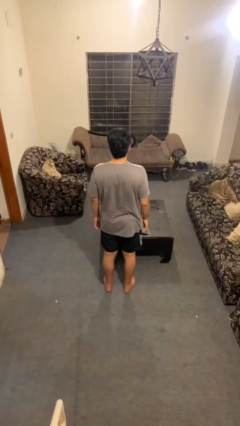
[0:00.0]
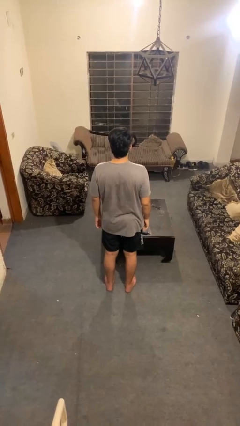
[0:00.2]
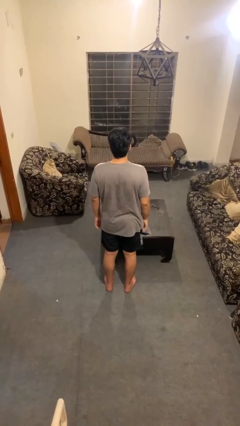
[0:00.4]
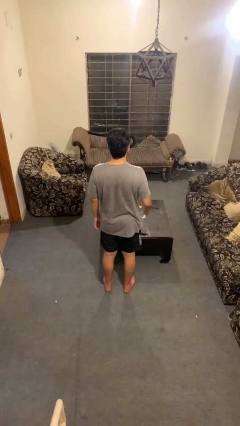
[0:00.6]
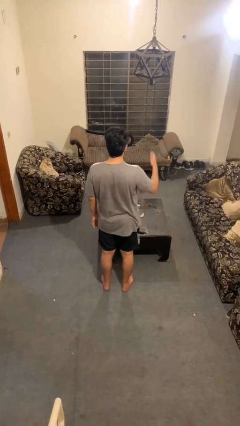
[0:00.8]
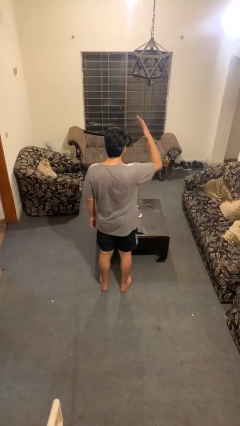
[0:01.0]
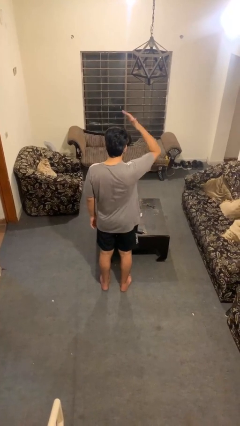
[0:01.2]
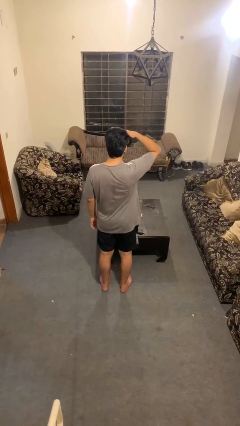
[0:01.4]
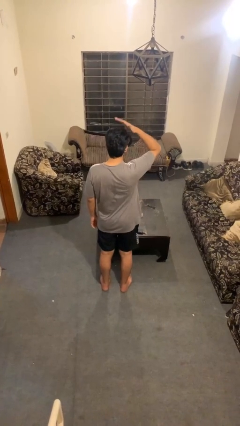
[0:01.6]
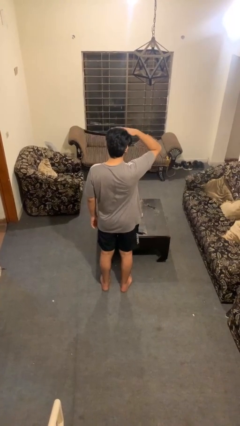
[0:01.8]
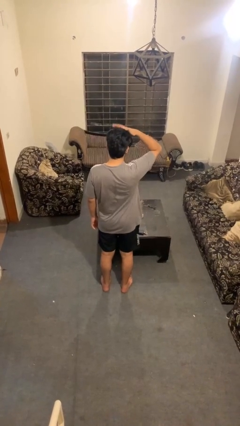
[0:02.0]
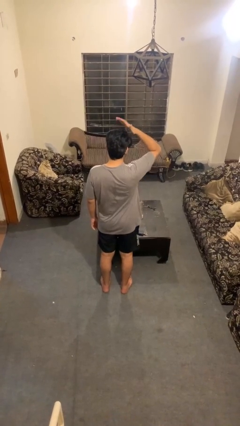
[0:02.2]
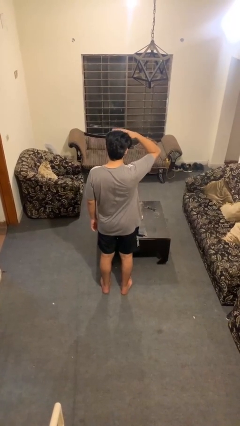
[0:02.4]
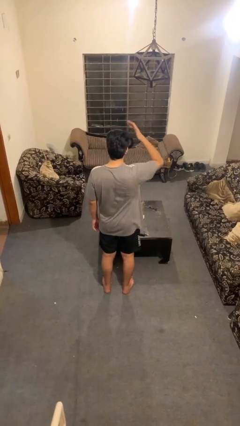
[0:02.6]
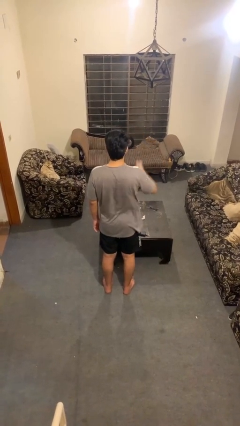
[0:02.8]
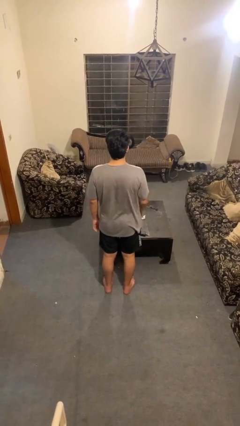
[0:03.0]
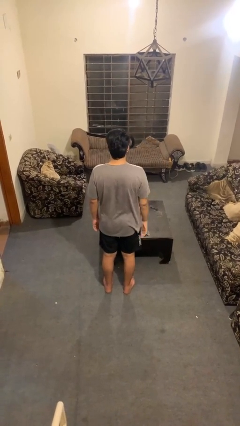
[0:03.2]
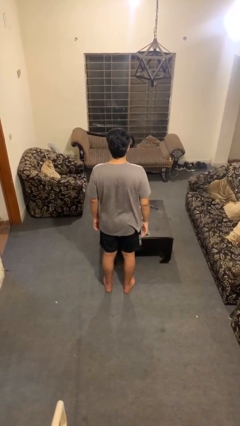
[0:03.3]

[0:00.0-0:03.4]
person pats head

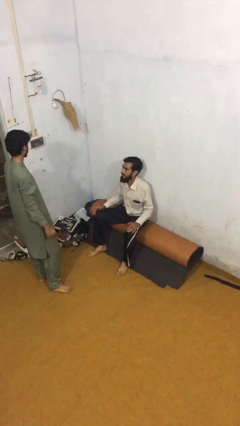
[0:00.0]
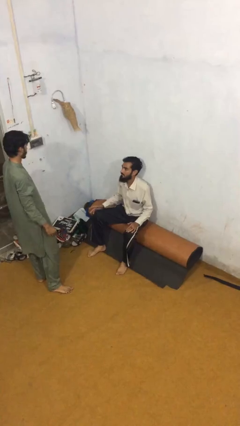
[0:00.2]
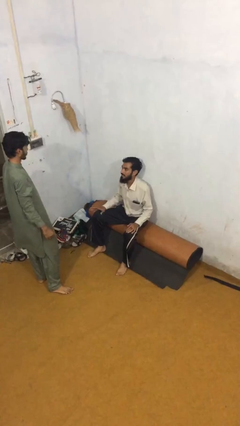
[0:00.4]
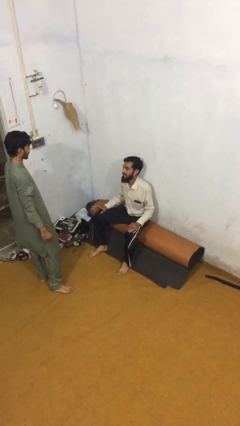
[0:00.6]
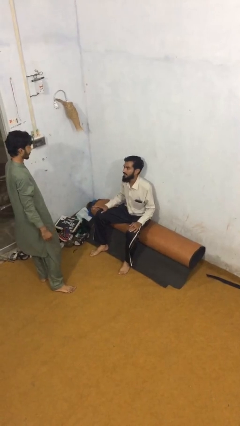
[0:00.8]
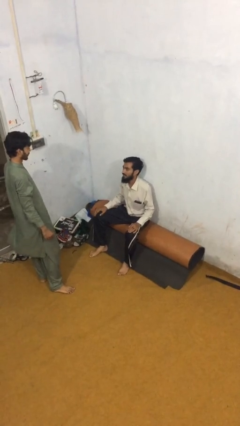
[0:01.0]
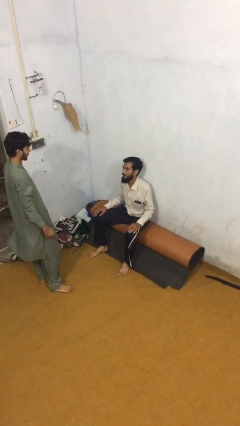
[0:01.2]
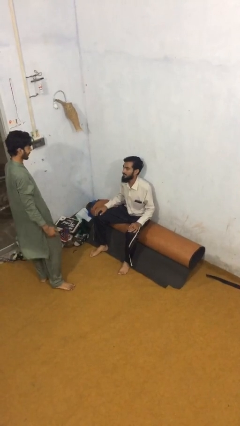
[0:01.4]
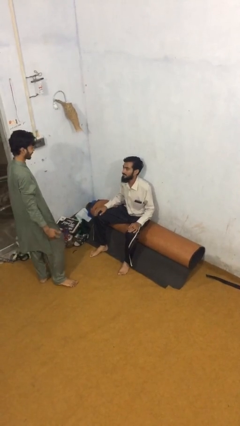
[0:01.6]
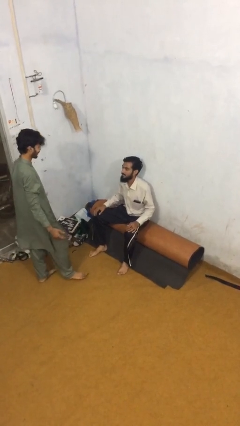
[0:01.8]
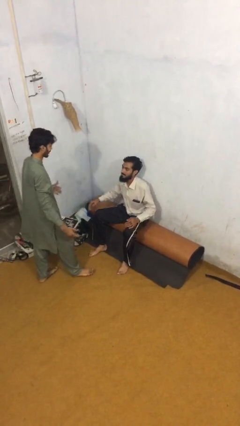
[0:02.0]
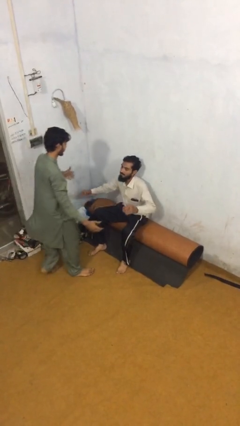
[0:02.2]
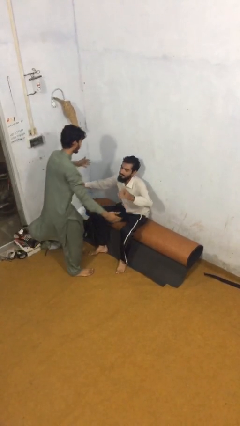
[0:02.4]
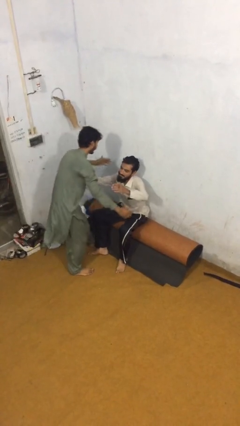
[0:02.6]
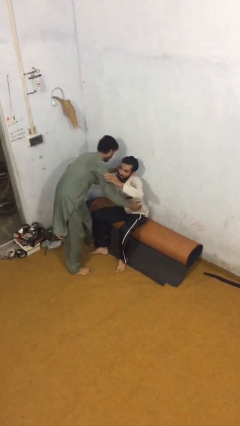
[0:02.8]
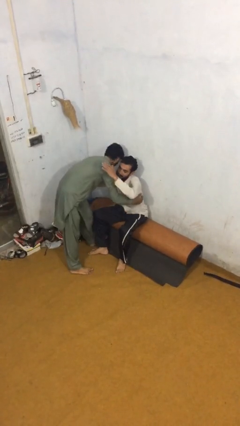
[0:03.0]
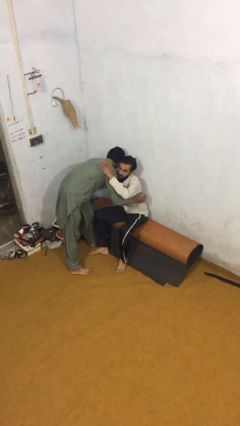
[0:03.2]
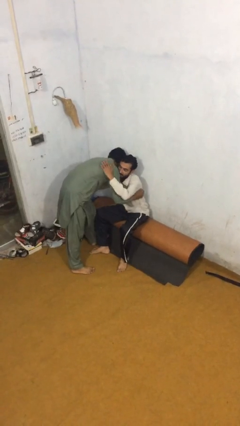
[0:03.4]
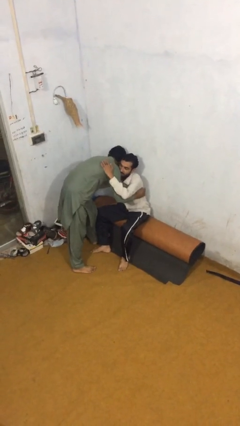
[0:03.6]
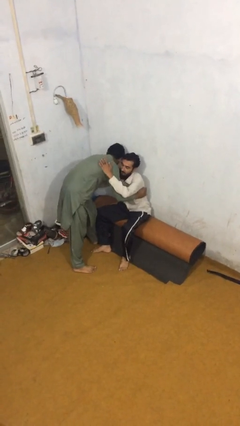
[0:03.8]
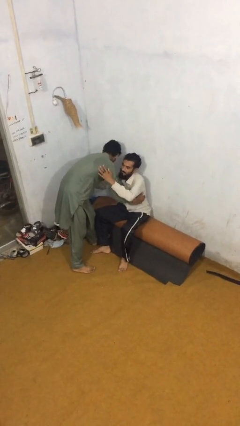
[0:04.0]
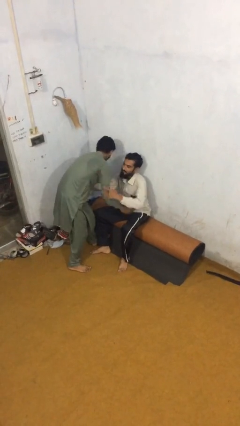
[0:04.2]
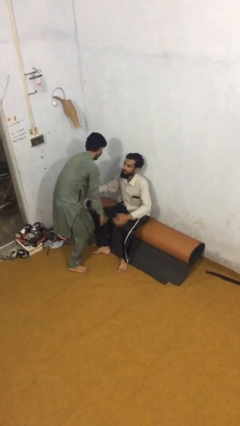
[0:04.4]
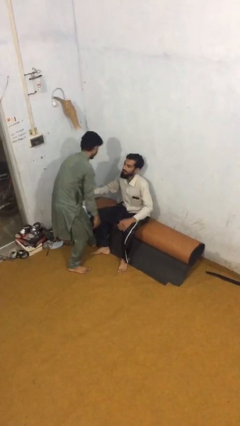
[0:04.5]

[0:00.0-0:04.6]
person embraces person

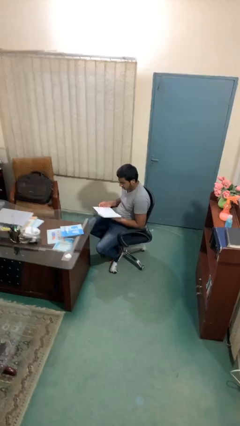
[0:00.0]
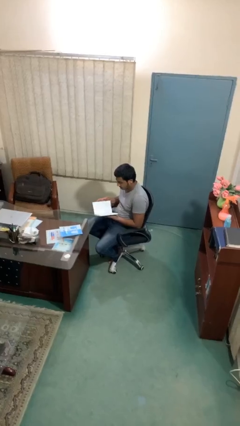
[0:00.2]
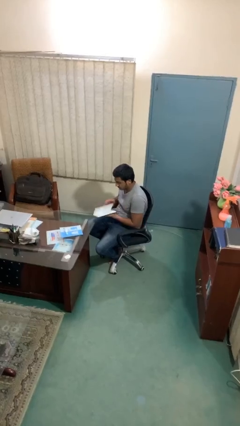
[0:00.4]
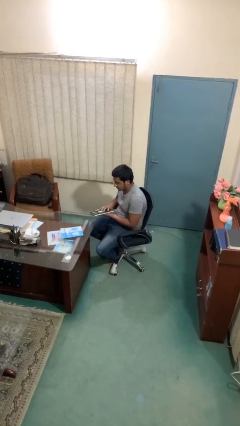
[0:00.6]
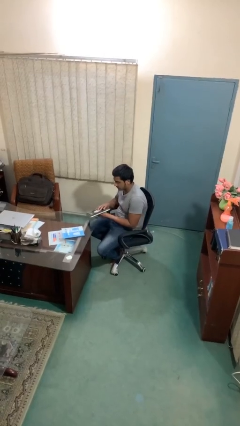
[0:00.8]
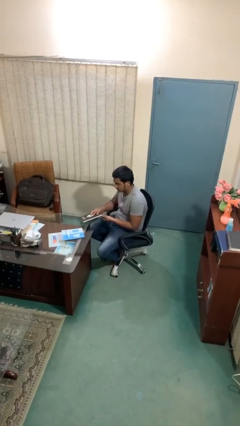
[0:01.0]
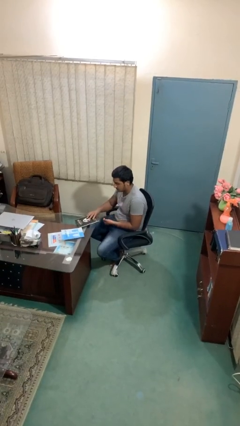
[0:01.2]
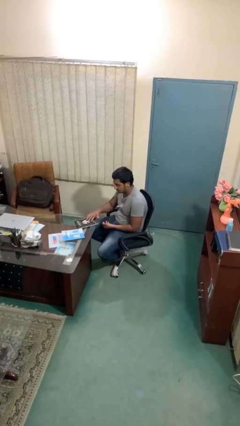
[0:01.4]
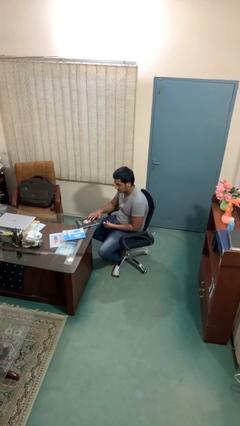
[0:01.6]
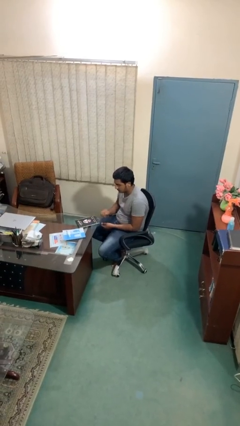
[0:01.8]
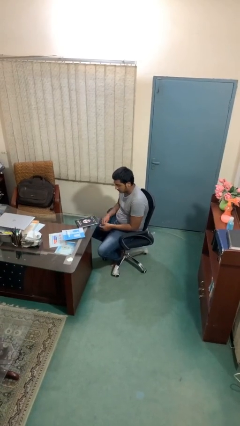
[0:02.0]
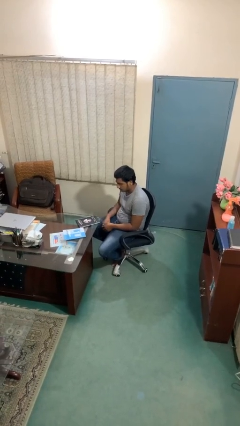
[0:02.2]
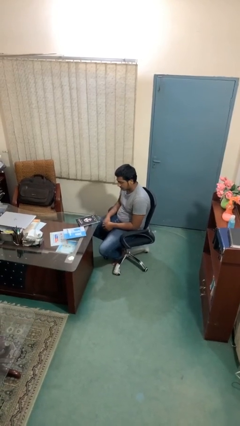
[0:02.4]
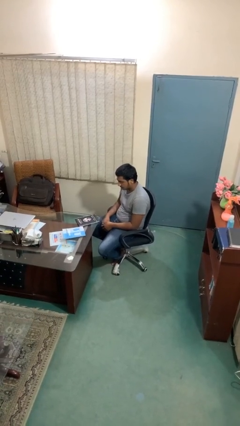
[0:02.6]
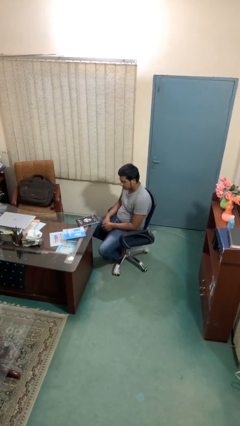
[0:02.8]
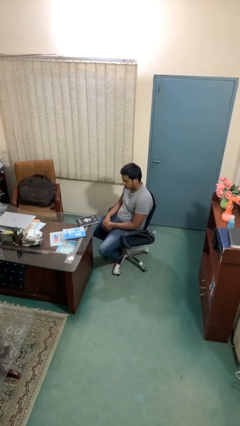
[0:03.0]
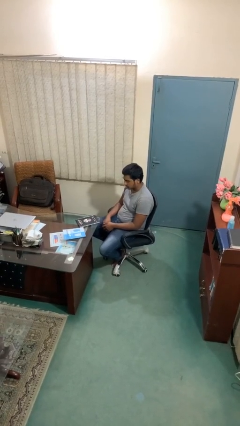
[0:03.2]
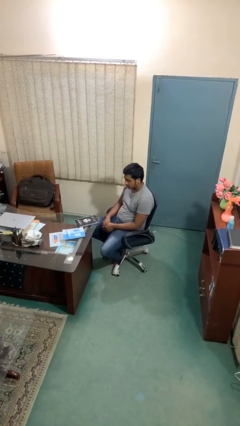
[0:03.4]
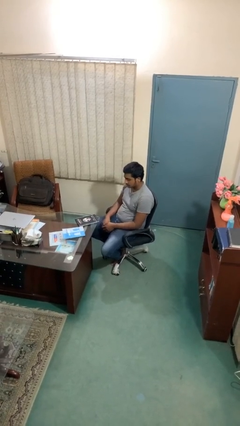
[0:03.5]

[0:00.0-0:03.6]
person puts down object on table

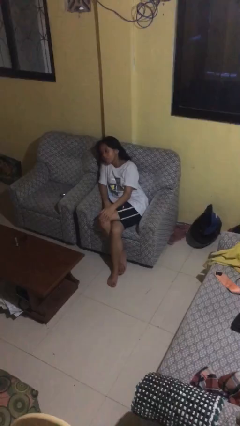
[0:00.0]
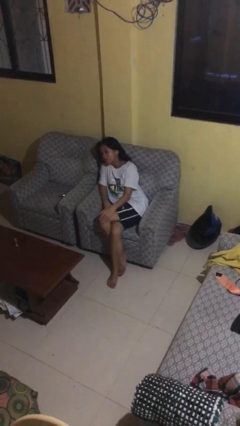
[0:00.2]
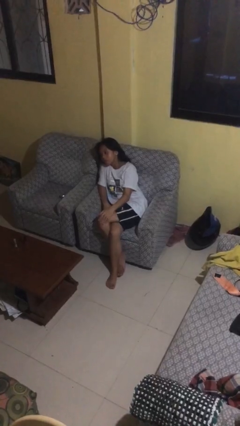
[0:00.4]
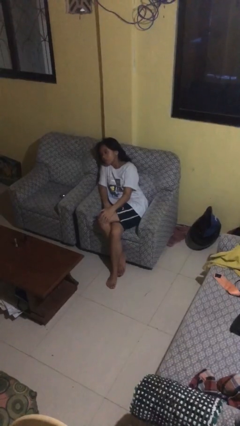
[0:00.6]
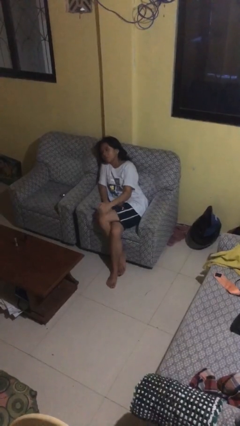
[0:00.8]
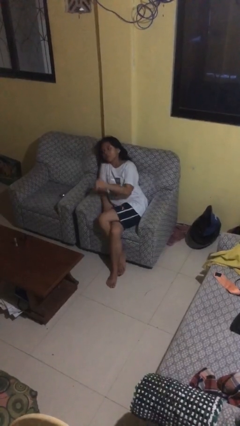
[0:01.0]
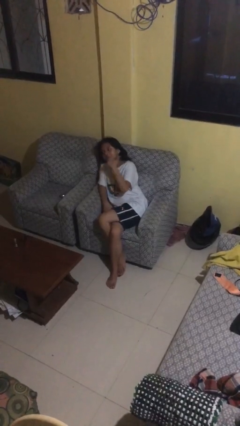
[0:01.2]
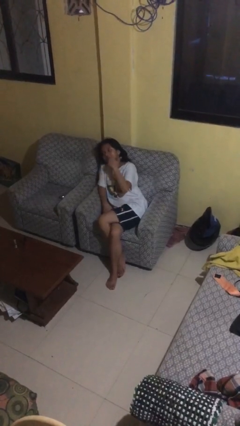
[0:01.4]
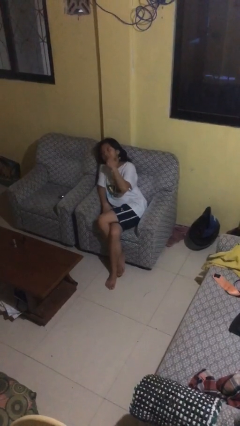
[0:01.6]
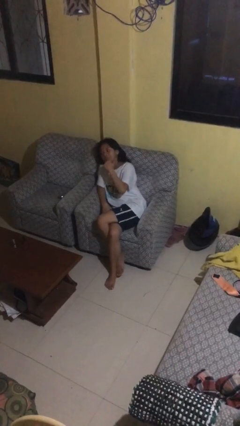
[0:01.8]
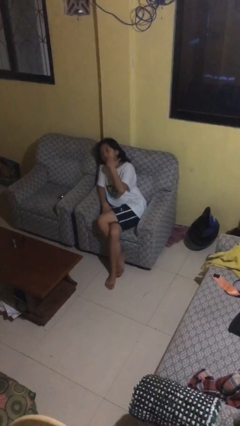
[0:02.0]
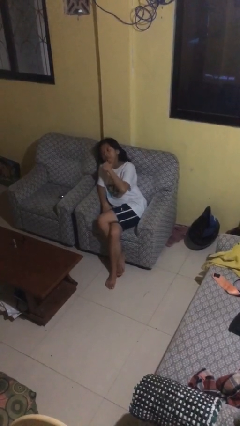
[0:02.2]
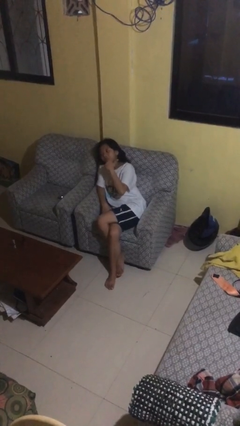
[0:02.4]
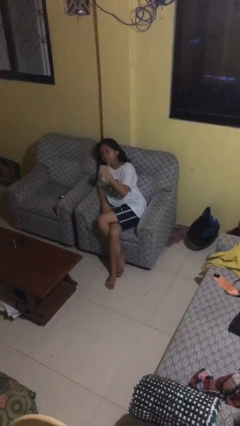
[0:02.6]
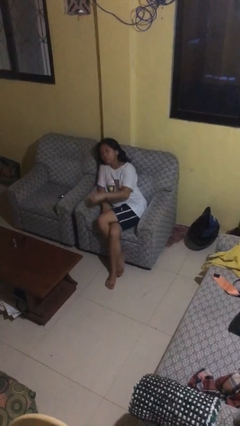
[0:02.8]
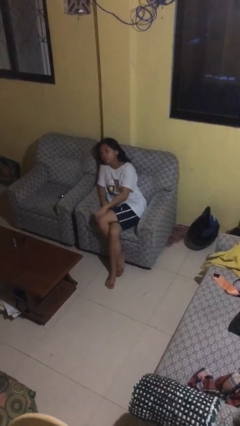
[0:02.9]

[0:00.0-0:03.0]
person gestures behind me

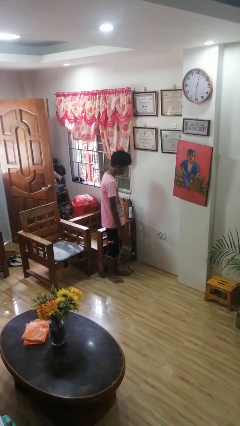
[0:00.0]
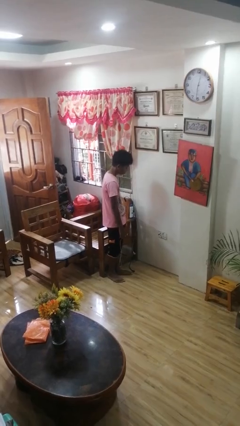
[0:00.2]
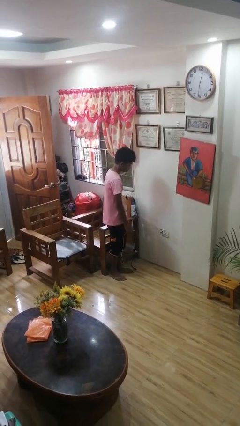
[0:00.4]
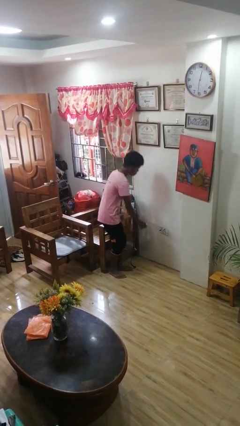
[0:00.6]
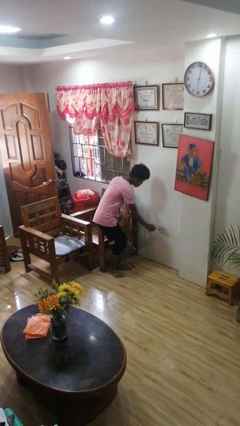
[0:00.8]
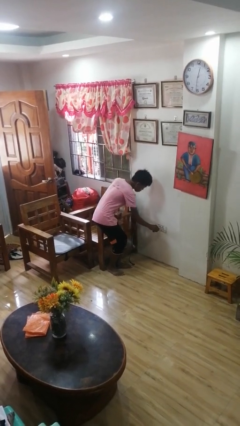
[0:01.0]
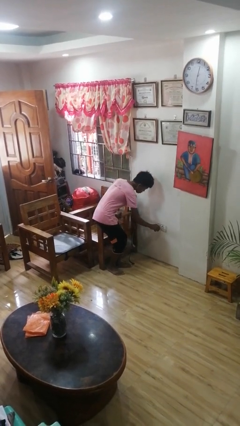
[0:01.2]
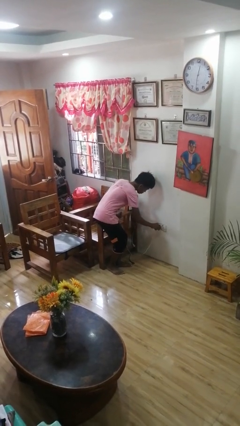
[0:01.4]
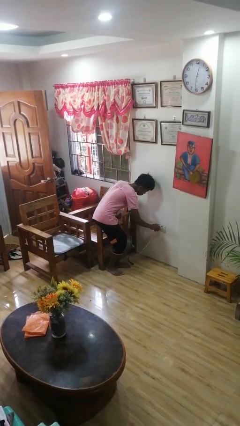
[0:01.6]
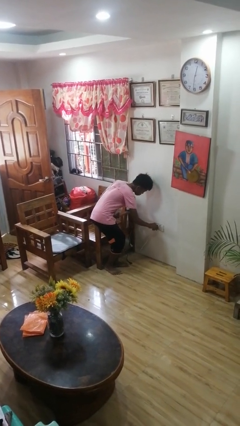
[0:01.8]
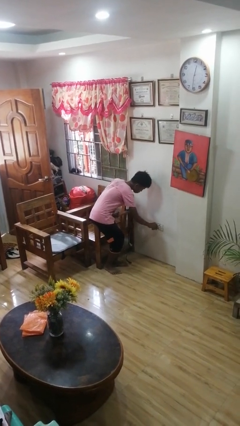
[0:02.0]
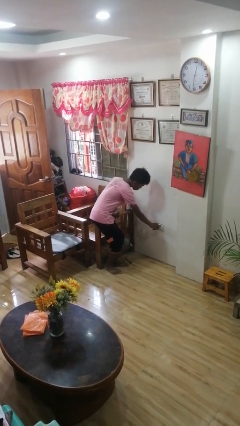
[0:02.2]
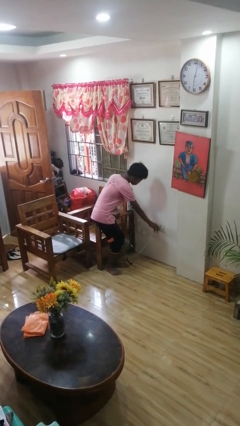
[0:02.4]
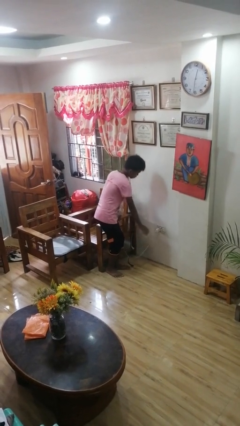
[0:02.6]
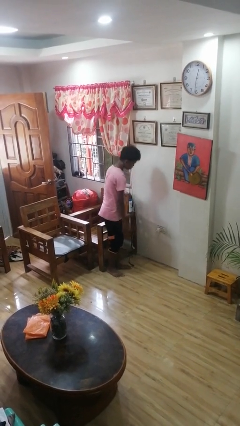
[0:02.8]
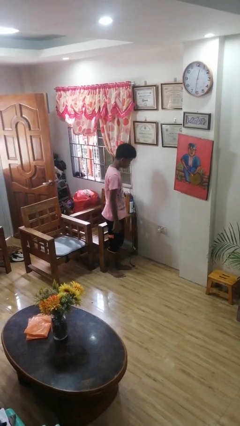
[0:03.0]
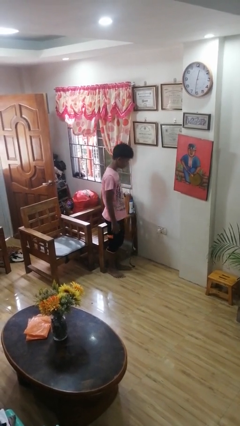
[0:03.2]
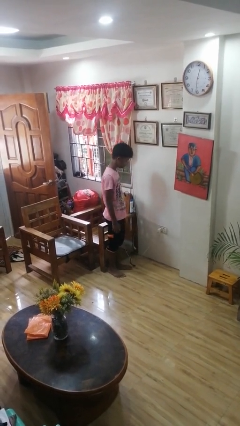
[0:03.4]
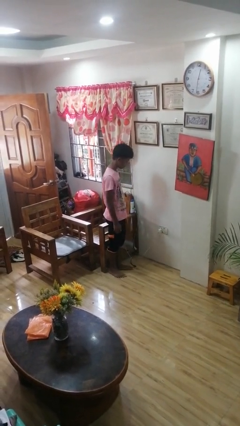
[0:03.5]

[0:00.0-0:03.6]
person plugs into electrical socket
